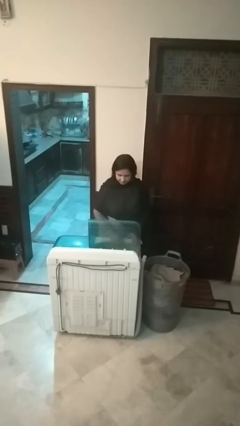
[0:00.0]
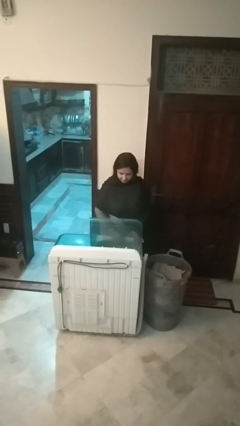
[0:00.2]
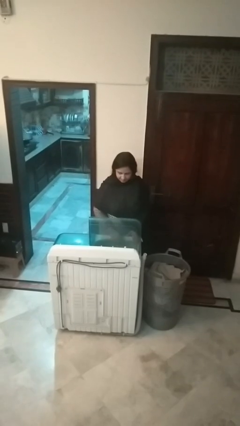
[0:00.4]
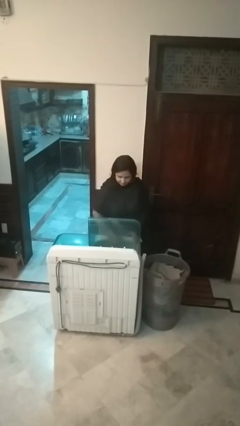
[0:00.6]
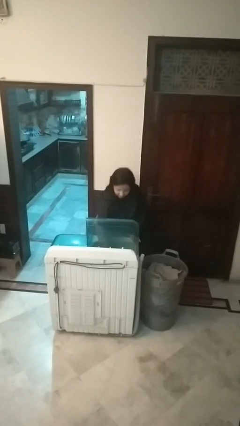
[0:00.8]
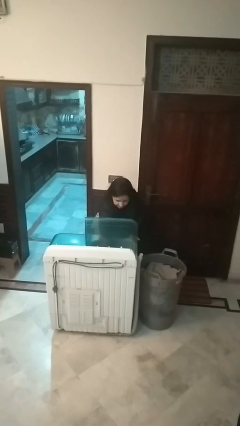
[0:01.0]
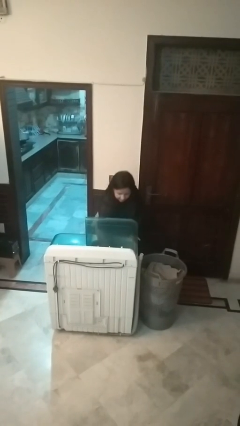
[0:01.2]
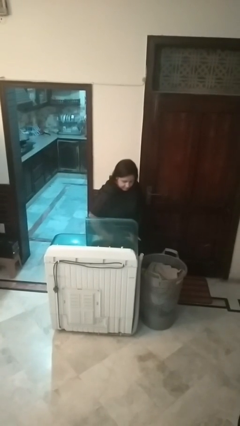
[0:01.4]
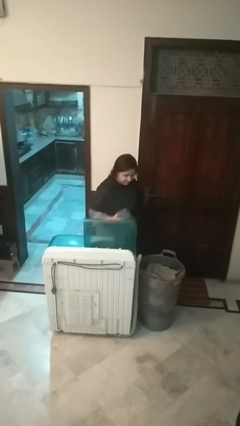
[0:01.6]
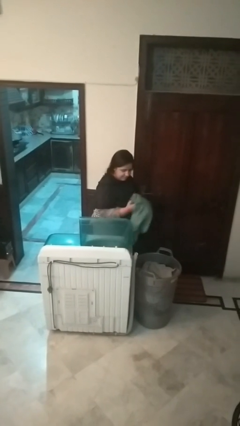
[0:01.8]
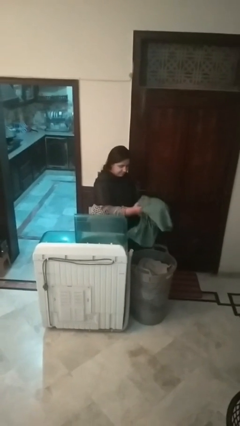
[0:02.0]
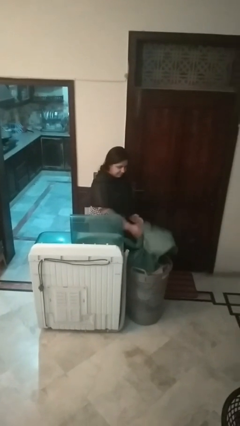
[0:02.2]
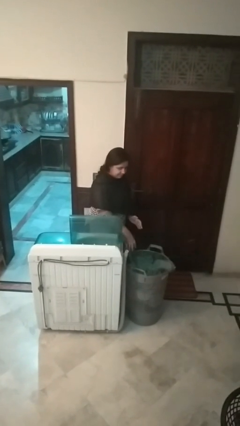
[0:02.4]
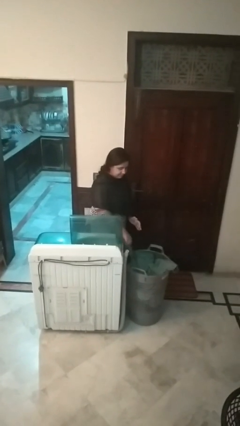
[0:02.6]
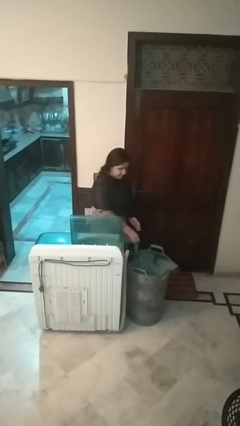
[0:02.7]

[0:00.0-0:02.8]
person unloads clotheswasher

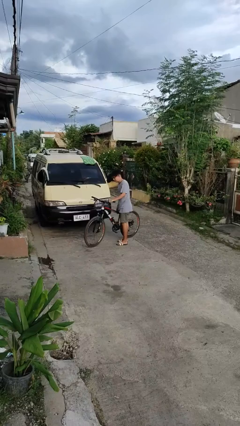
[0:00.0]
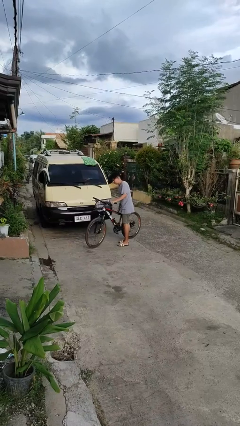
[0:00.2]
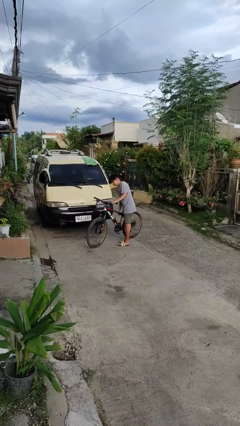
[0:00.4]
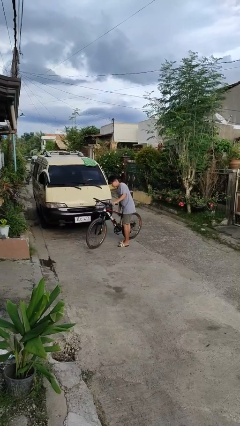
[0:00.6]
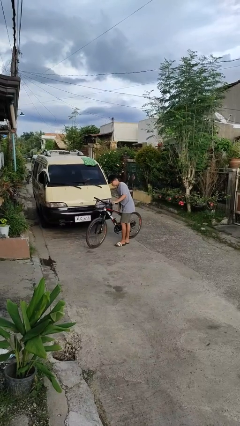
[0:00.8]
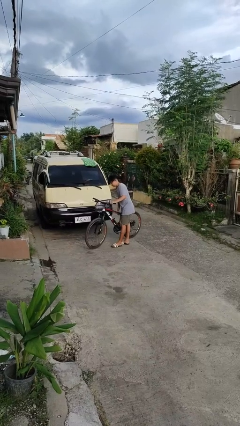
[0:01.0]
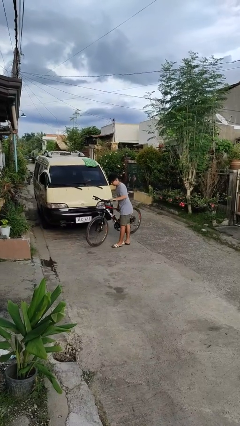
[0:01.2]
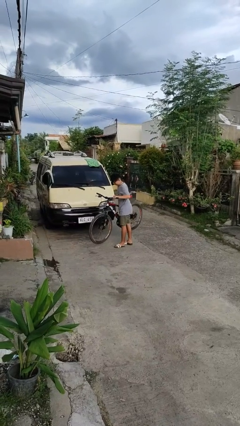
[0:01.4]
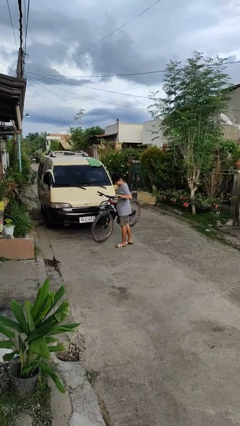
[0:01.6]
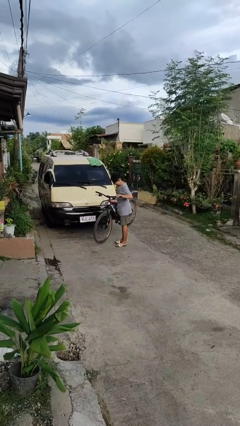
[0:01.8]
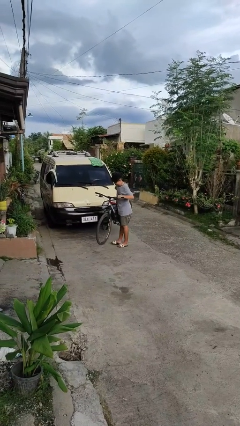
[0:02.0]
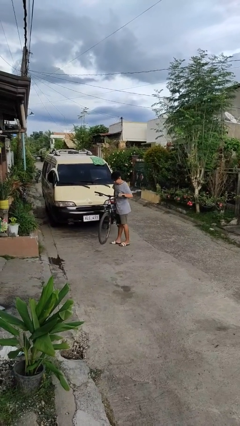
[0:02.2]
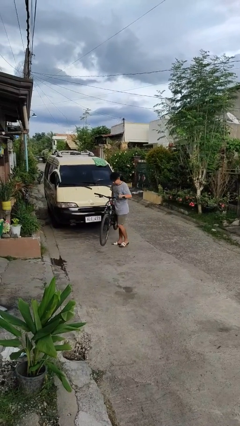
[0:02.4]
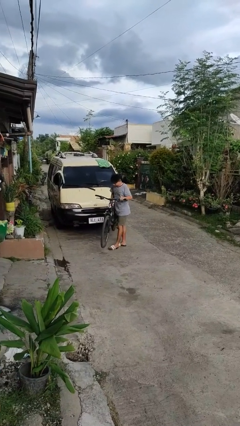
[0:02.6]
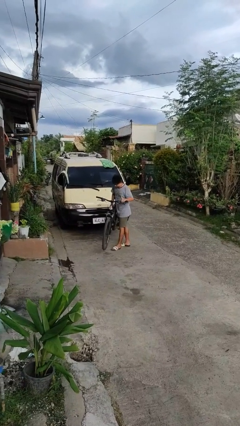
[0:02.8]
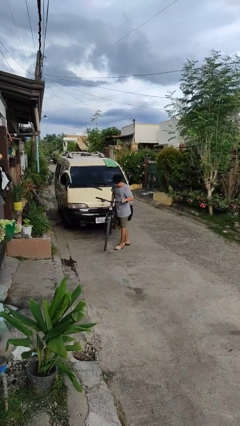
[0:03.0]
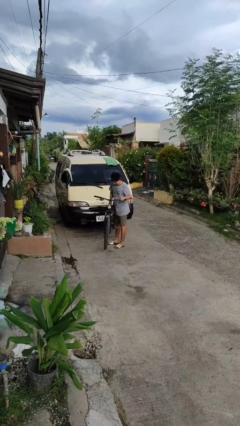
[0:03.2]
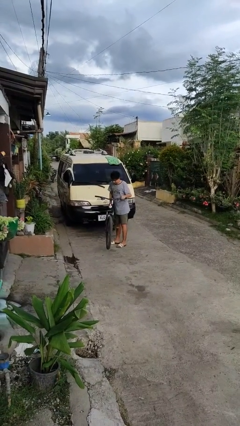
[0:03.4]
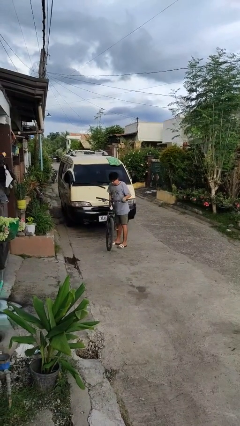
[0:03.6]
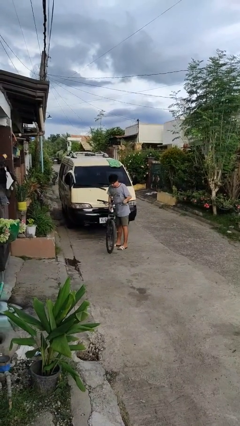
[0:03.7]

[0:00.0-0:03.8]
person carries bicycle

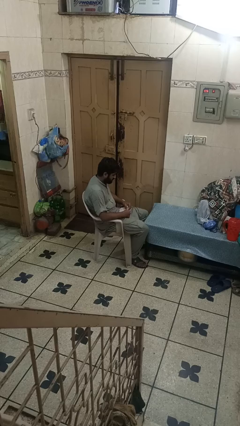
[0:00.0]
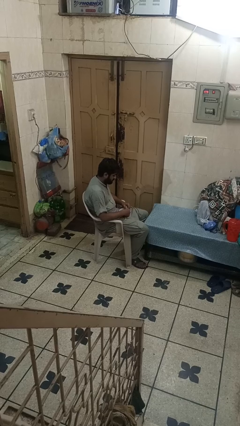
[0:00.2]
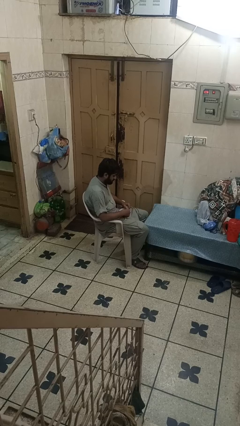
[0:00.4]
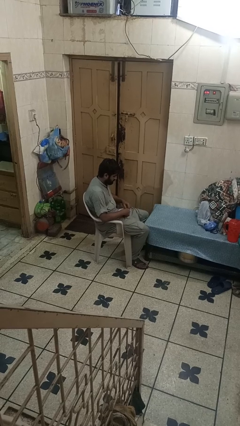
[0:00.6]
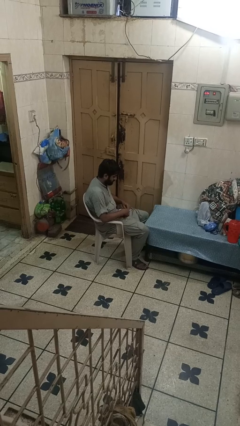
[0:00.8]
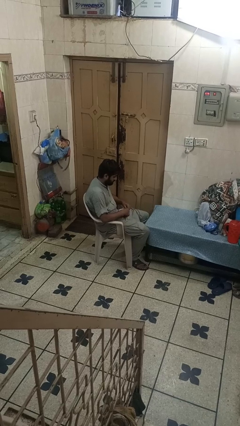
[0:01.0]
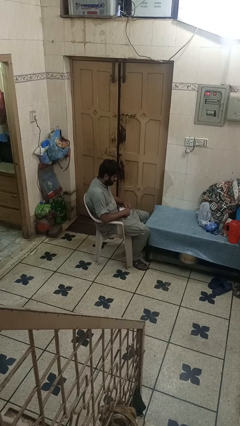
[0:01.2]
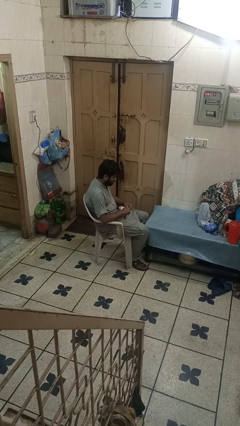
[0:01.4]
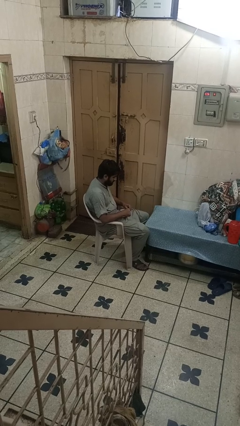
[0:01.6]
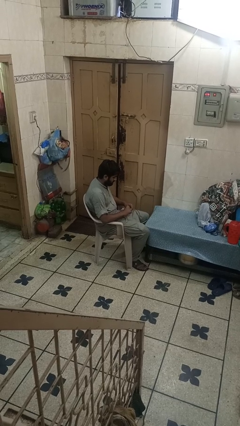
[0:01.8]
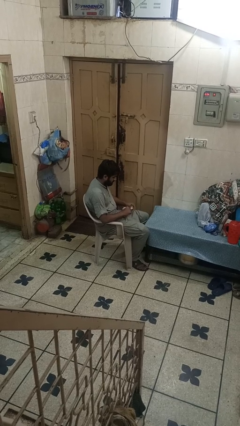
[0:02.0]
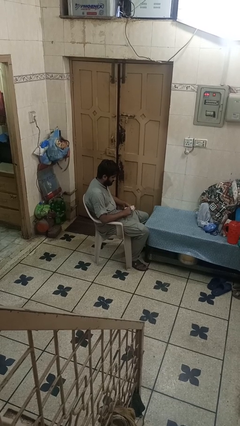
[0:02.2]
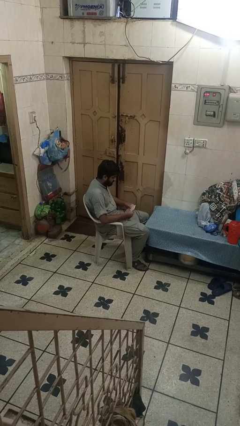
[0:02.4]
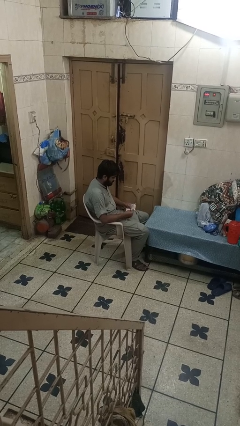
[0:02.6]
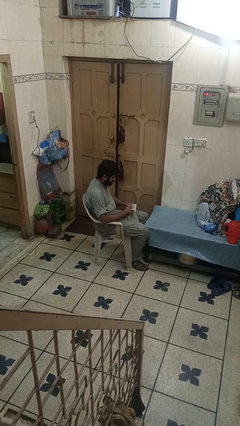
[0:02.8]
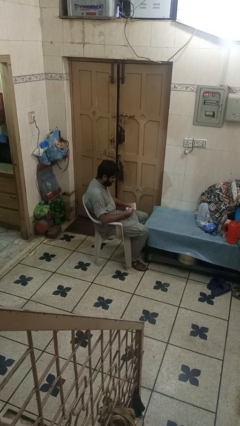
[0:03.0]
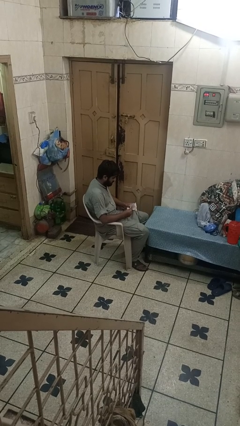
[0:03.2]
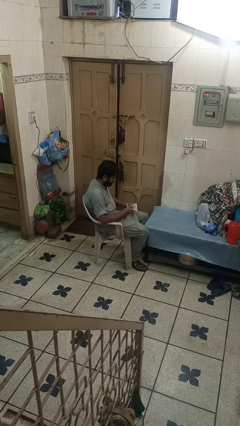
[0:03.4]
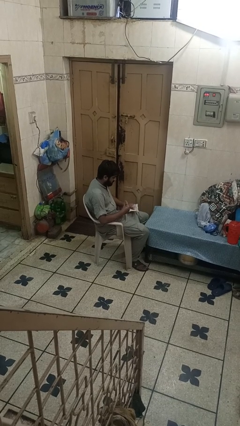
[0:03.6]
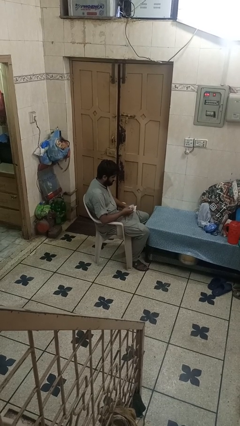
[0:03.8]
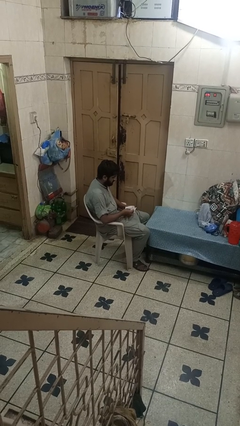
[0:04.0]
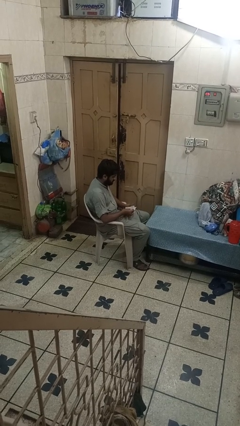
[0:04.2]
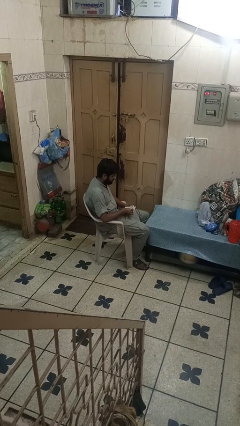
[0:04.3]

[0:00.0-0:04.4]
person tears paper

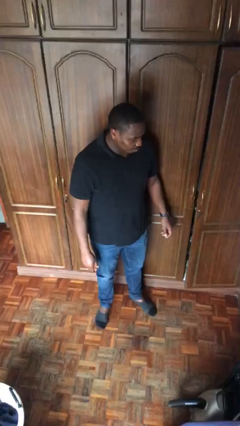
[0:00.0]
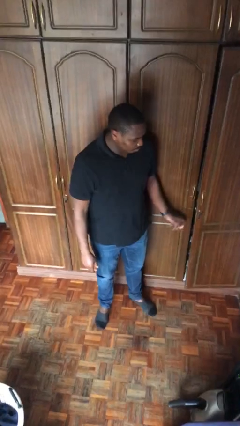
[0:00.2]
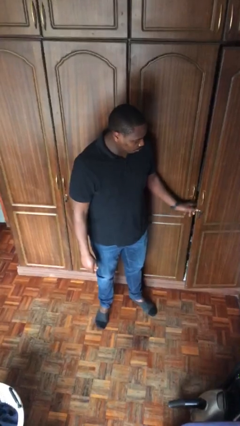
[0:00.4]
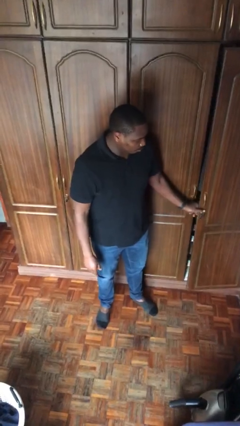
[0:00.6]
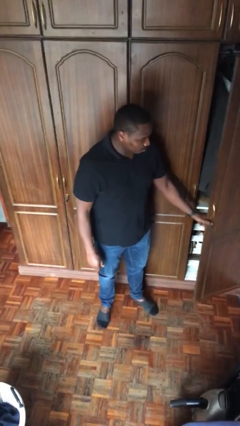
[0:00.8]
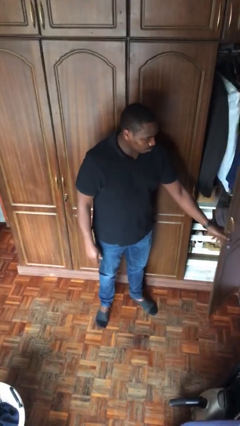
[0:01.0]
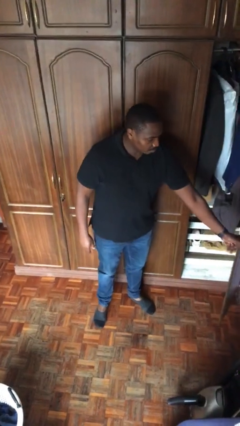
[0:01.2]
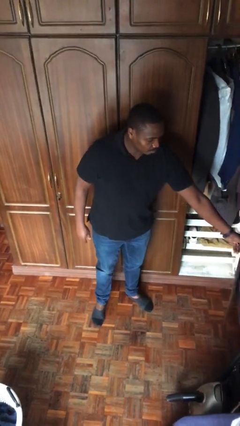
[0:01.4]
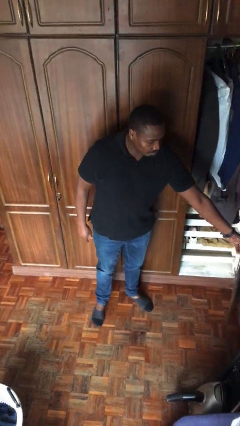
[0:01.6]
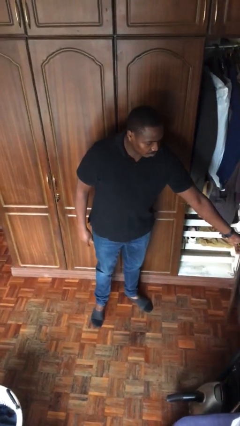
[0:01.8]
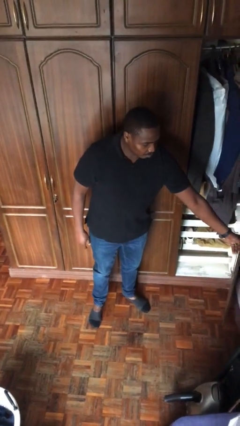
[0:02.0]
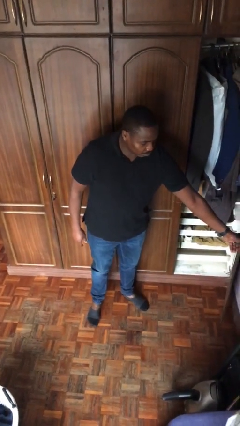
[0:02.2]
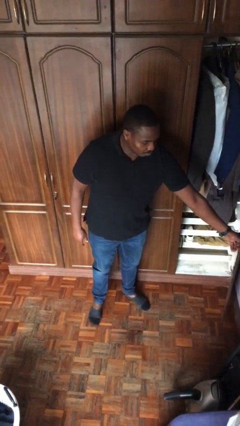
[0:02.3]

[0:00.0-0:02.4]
person opens closet door

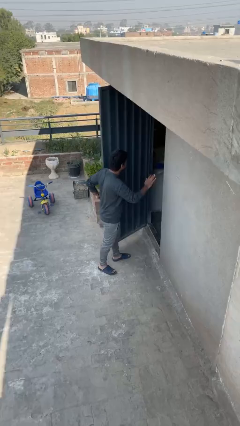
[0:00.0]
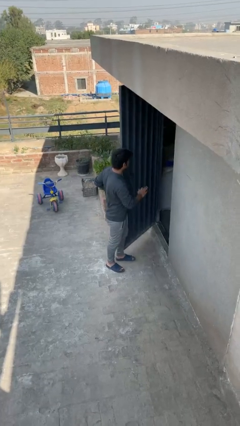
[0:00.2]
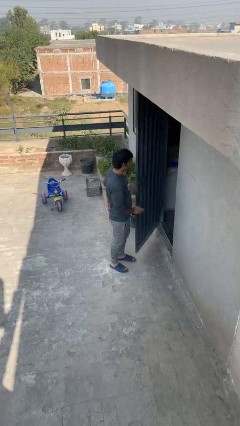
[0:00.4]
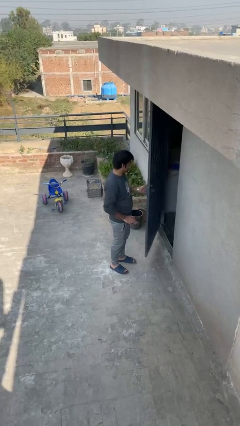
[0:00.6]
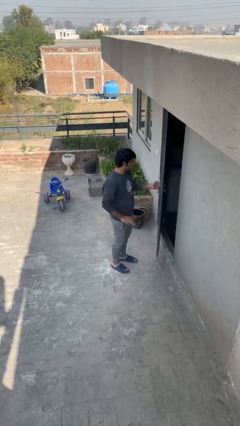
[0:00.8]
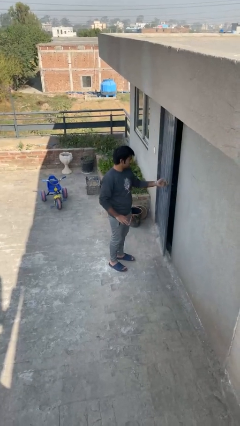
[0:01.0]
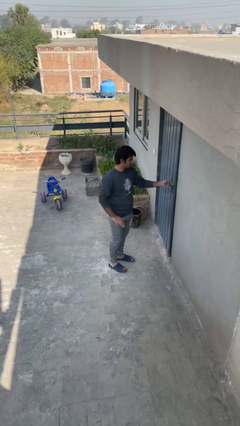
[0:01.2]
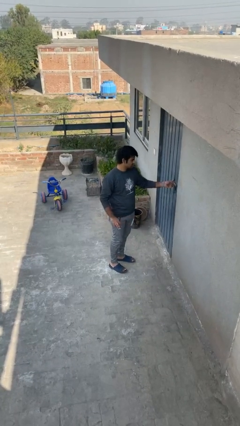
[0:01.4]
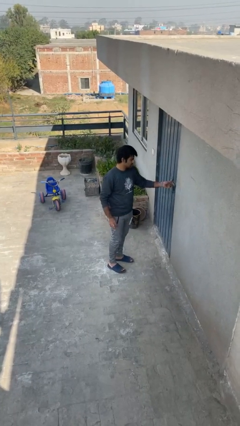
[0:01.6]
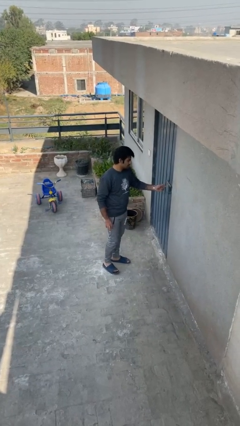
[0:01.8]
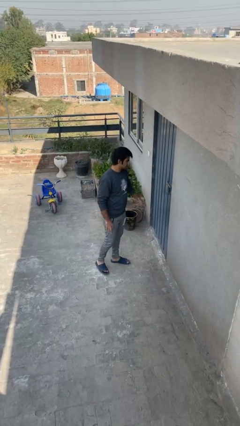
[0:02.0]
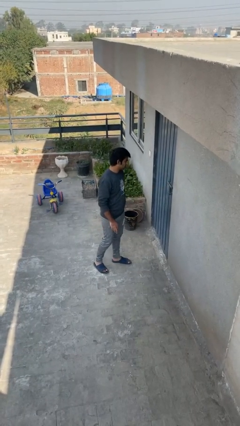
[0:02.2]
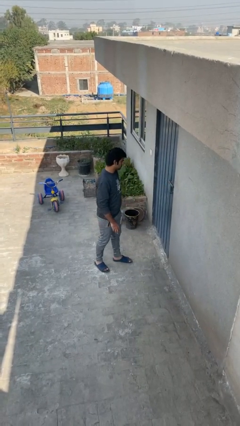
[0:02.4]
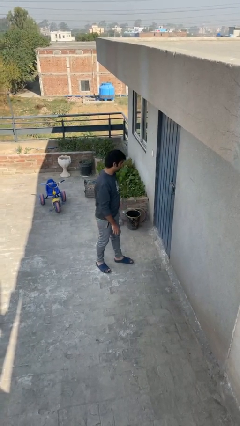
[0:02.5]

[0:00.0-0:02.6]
person closes facility door

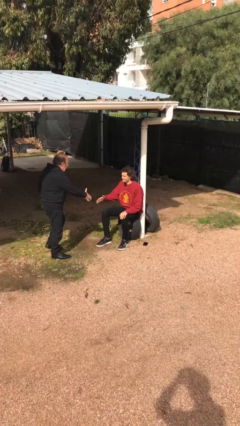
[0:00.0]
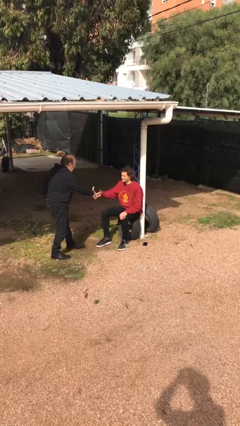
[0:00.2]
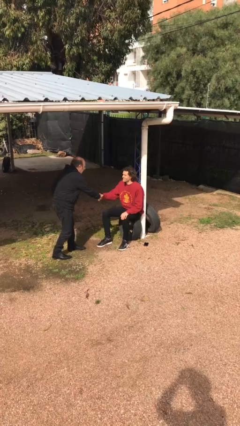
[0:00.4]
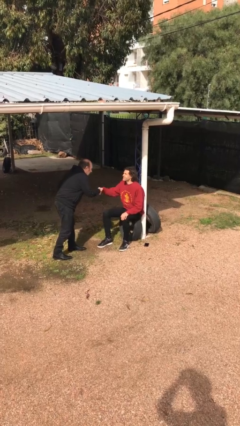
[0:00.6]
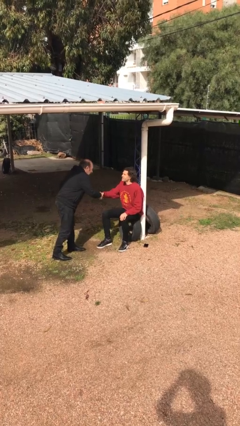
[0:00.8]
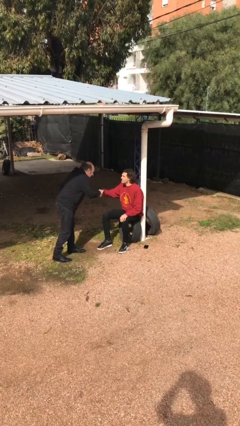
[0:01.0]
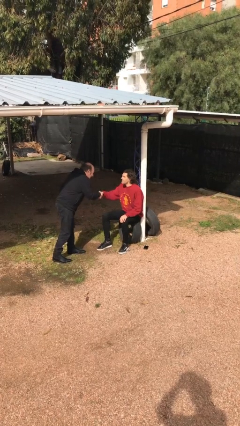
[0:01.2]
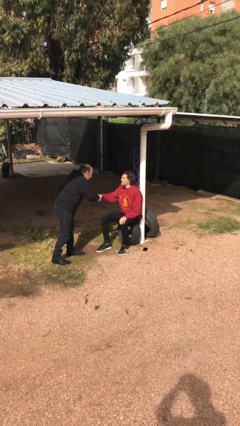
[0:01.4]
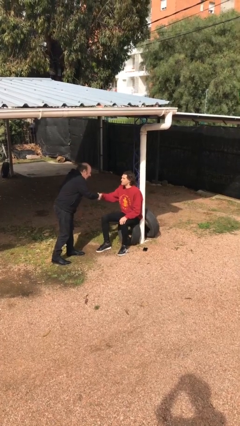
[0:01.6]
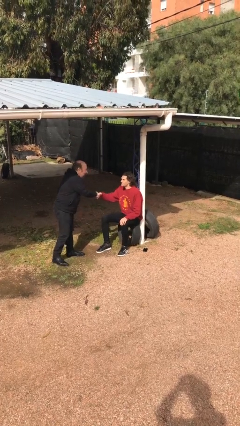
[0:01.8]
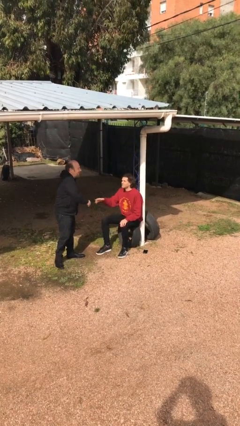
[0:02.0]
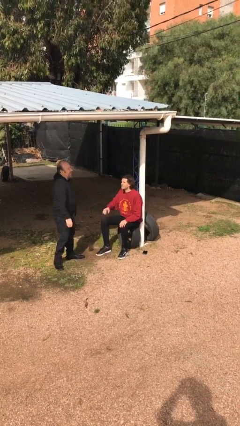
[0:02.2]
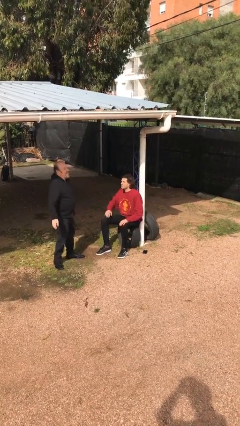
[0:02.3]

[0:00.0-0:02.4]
person shakes hand
